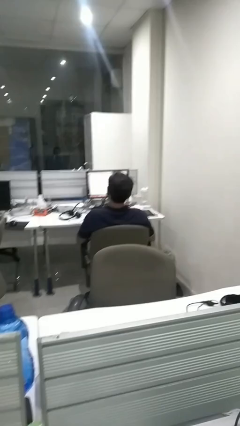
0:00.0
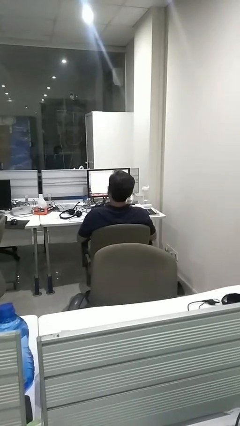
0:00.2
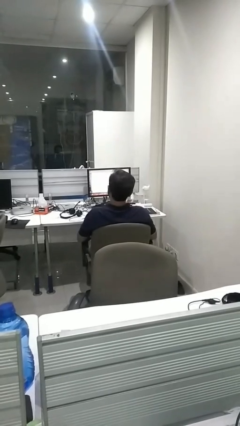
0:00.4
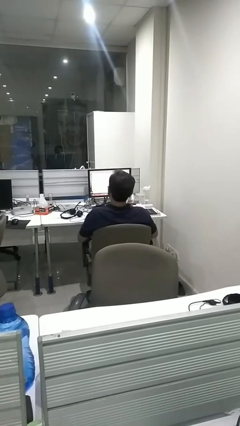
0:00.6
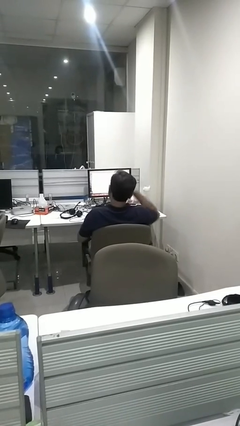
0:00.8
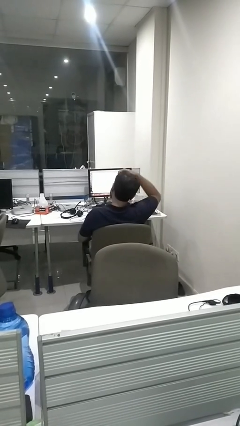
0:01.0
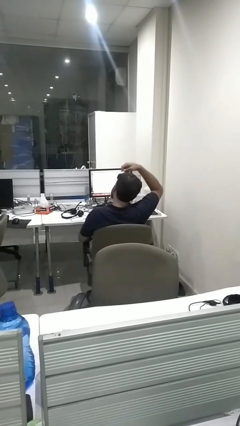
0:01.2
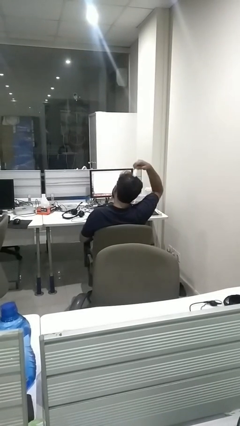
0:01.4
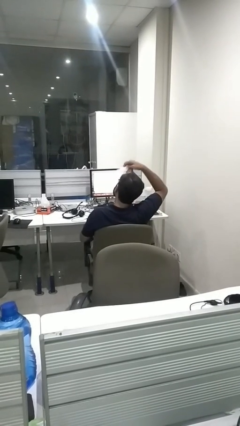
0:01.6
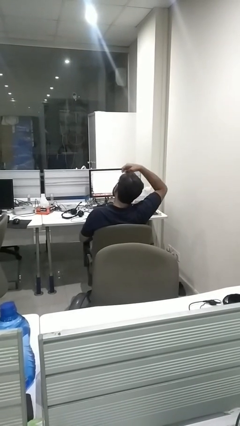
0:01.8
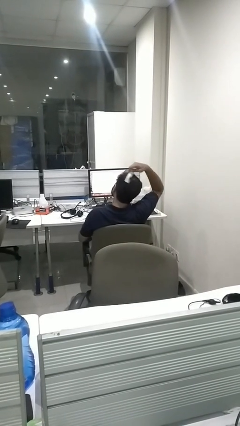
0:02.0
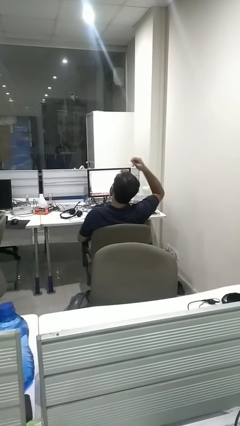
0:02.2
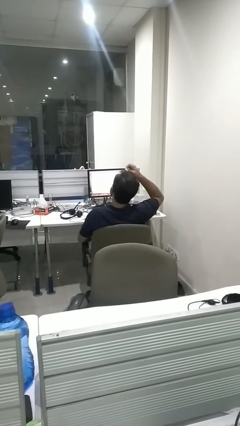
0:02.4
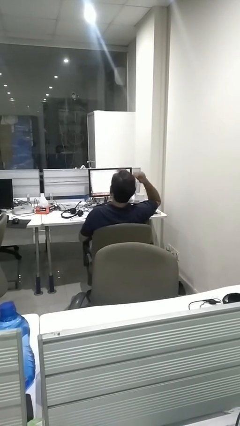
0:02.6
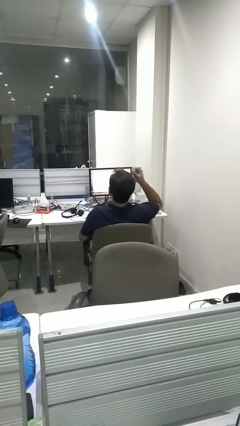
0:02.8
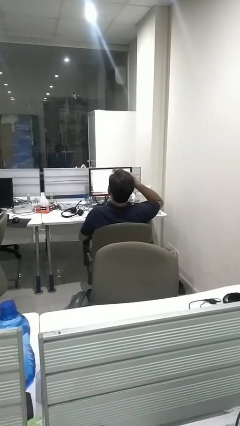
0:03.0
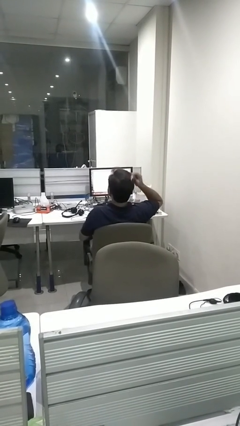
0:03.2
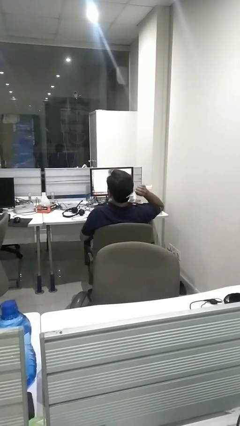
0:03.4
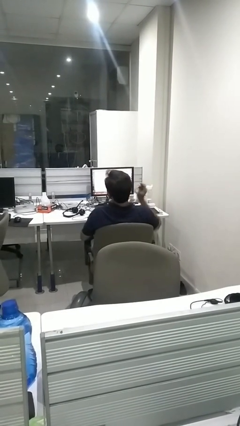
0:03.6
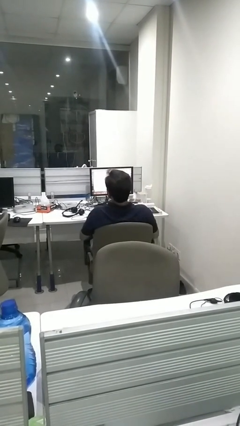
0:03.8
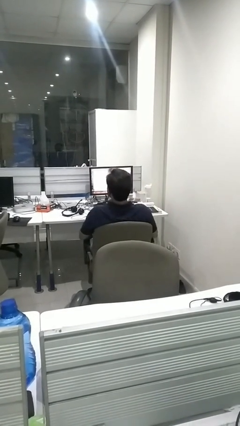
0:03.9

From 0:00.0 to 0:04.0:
person brushes hair

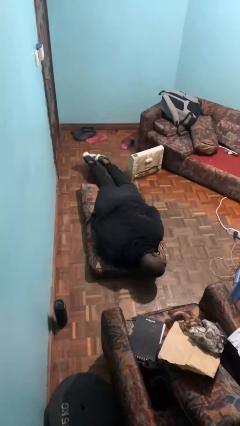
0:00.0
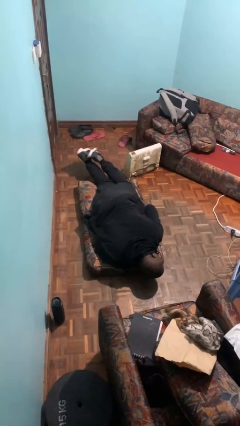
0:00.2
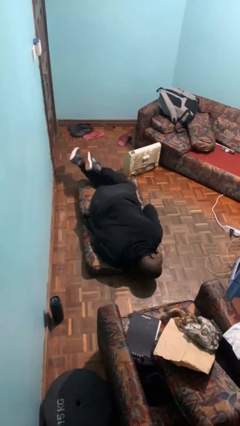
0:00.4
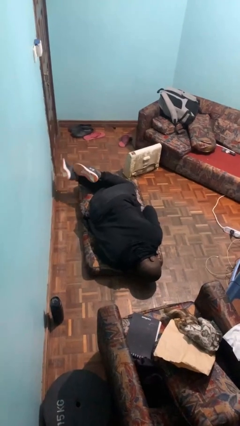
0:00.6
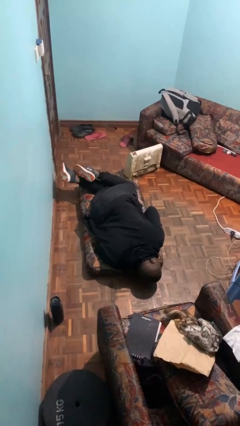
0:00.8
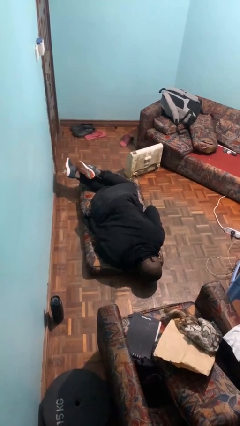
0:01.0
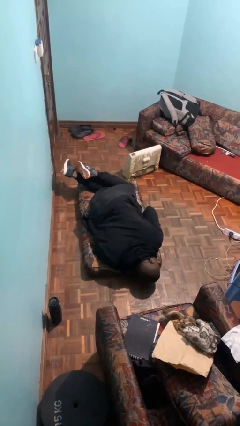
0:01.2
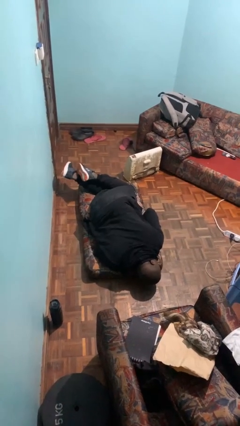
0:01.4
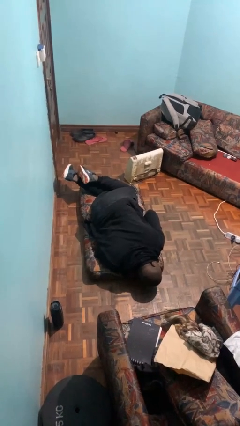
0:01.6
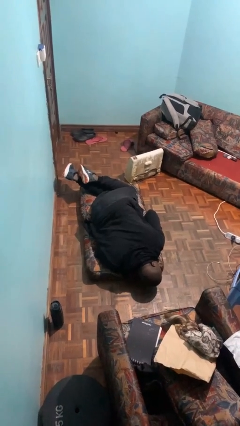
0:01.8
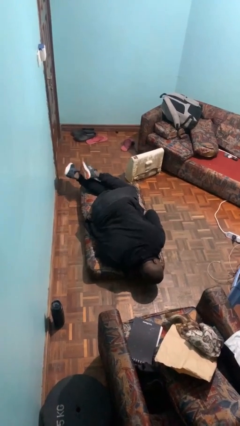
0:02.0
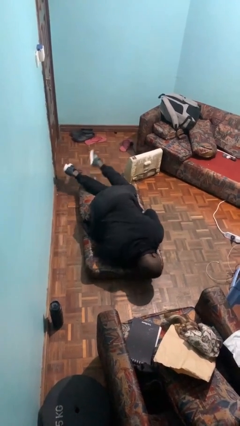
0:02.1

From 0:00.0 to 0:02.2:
person lies down on floor

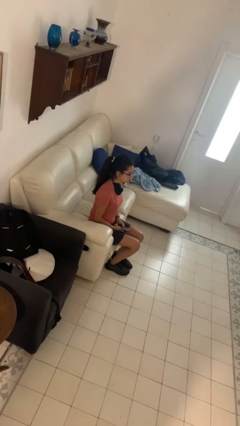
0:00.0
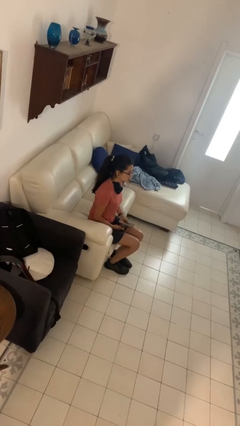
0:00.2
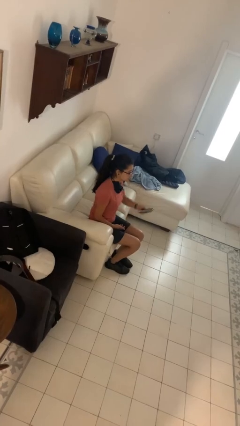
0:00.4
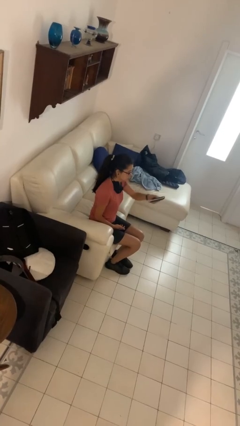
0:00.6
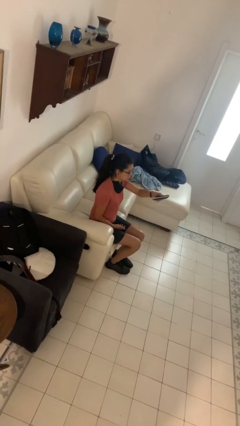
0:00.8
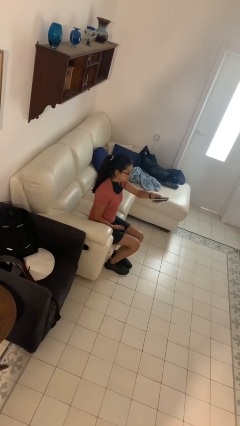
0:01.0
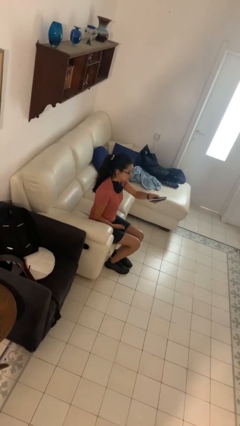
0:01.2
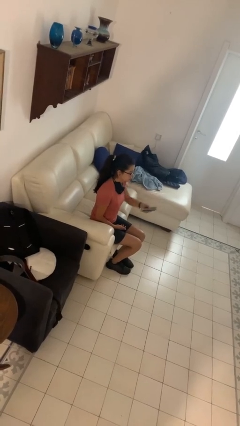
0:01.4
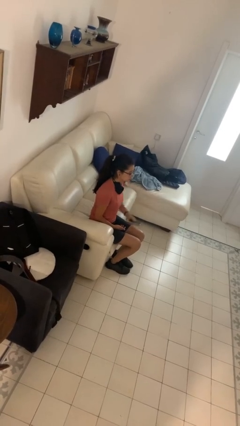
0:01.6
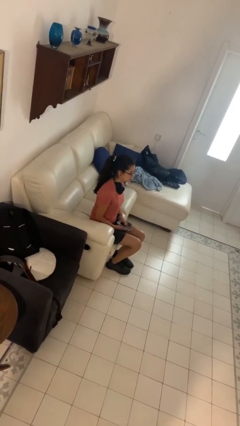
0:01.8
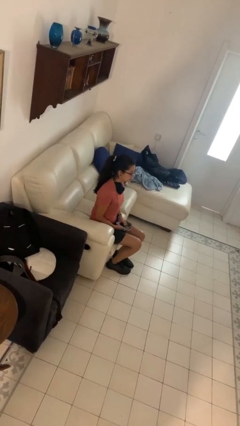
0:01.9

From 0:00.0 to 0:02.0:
person uses television remote

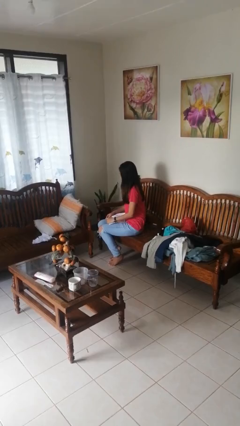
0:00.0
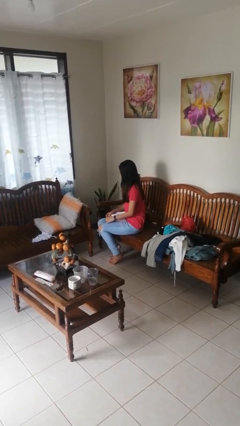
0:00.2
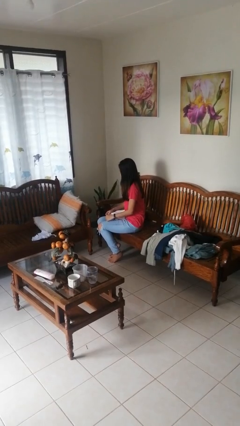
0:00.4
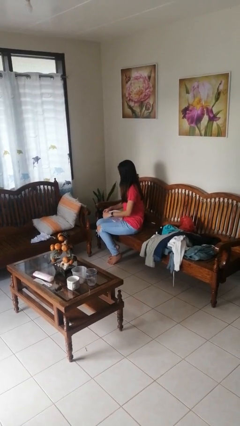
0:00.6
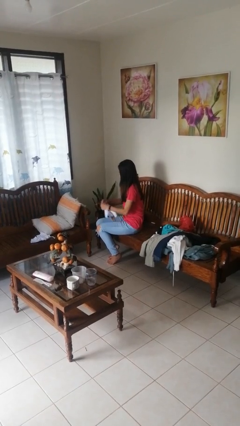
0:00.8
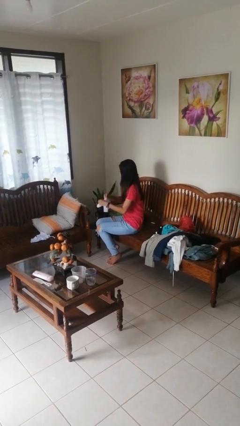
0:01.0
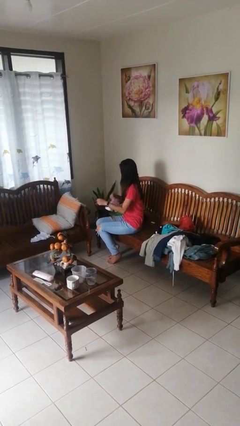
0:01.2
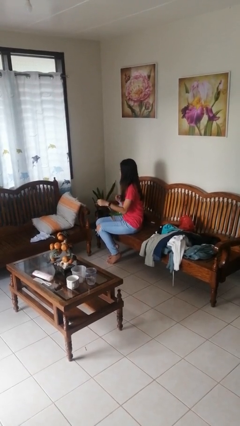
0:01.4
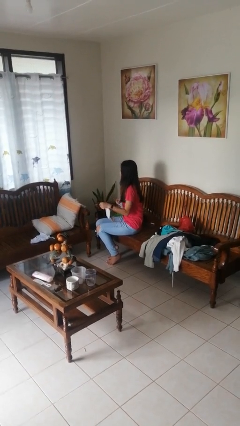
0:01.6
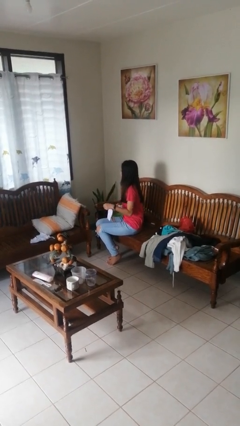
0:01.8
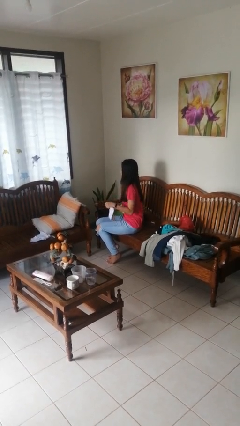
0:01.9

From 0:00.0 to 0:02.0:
person tears paper

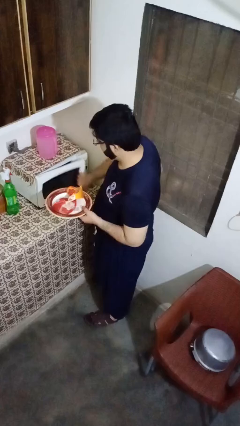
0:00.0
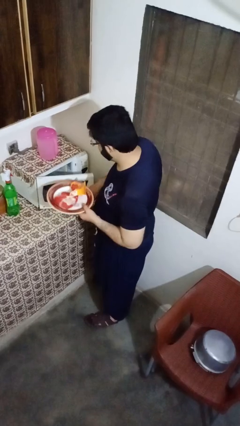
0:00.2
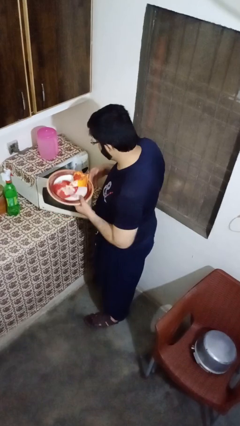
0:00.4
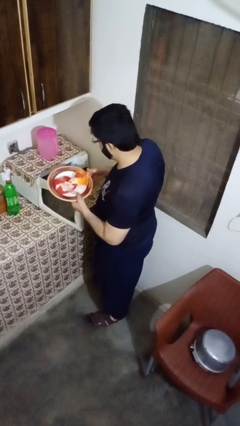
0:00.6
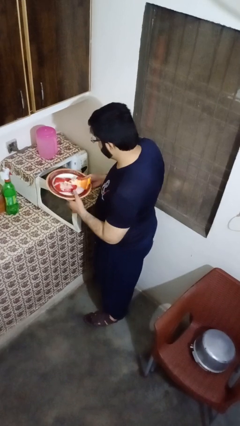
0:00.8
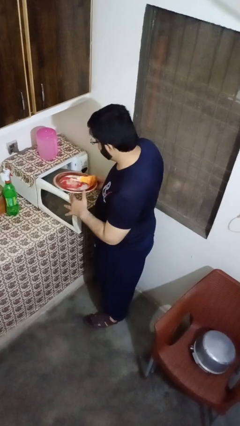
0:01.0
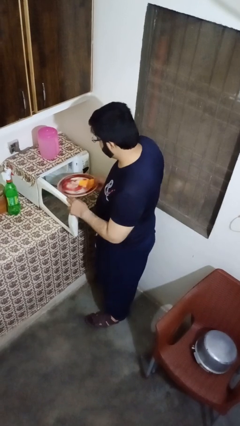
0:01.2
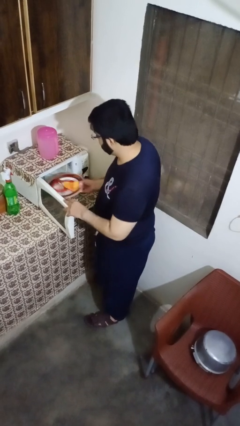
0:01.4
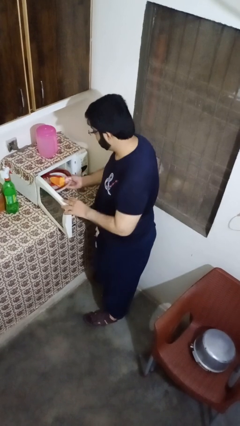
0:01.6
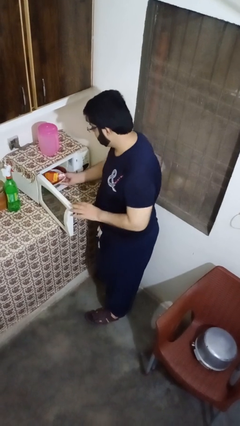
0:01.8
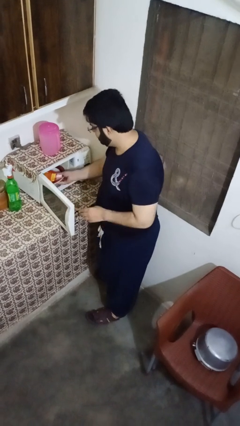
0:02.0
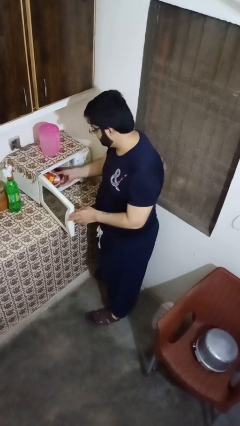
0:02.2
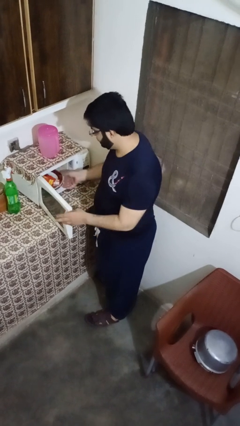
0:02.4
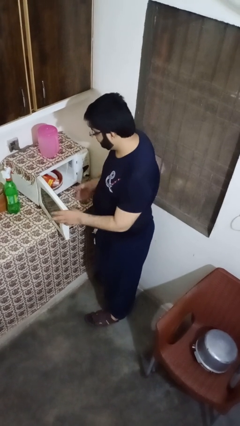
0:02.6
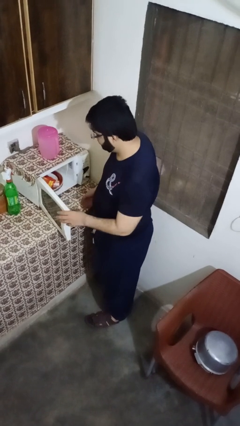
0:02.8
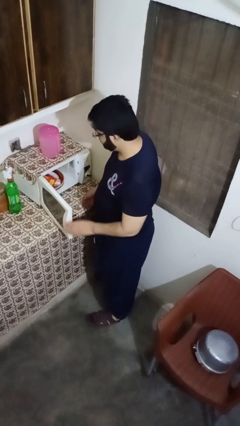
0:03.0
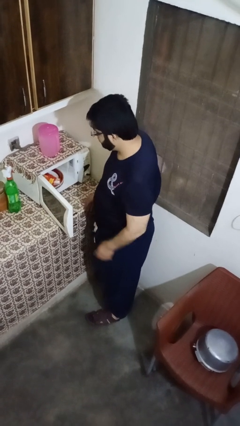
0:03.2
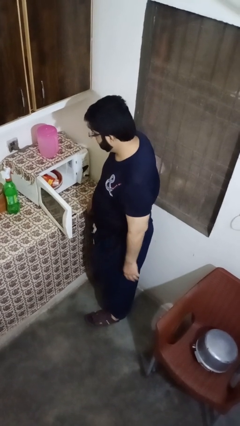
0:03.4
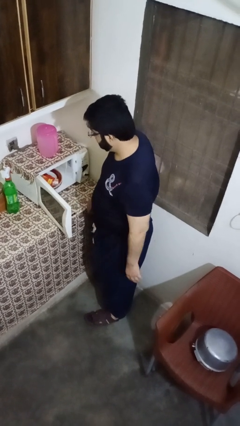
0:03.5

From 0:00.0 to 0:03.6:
person puts object into oven

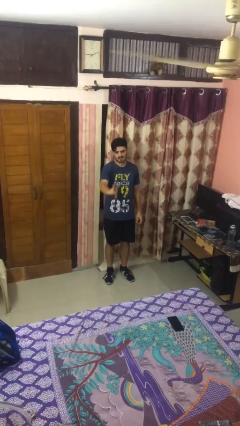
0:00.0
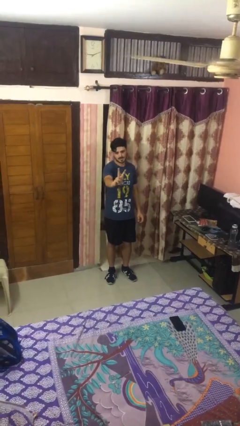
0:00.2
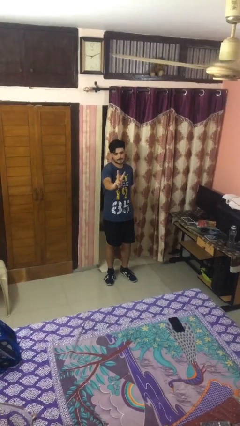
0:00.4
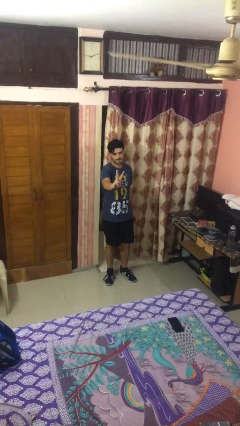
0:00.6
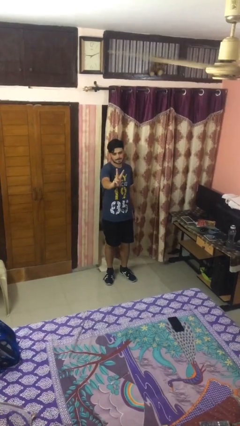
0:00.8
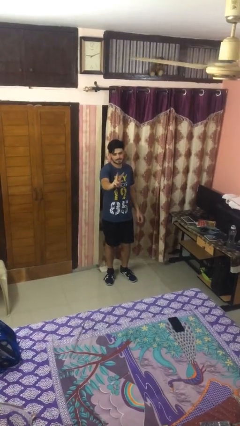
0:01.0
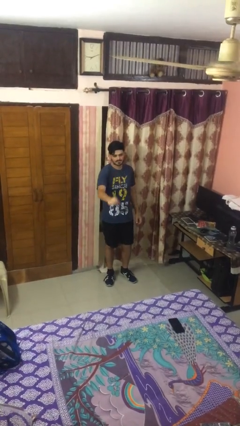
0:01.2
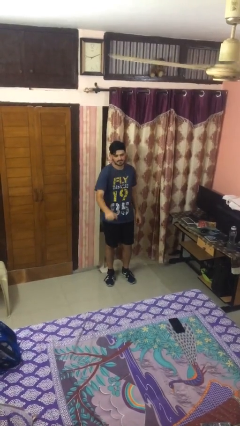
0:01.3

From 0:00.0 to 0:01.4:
person gestures peace

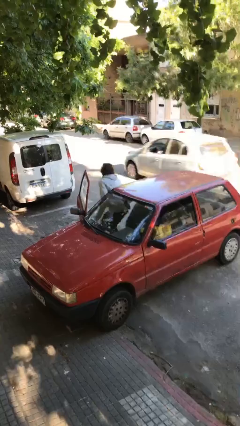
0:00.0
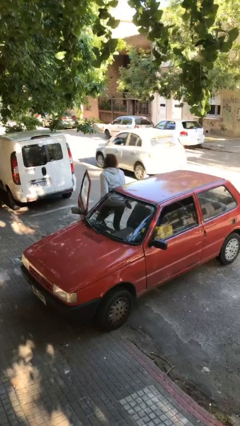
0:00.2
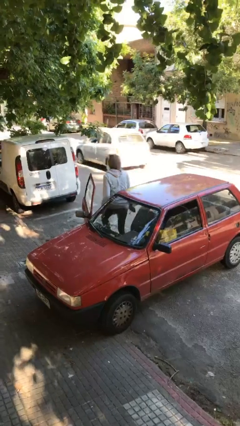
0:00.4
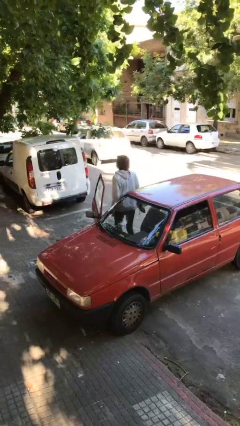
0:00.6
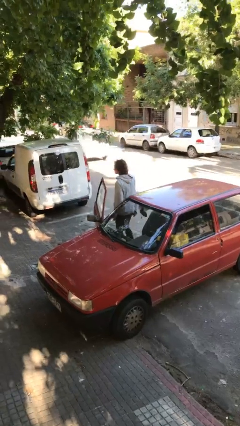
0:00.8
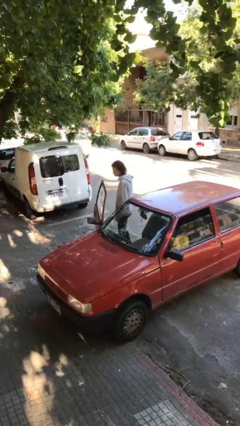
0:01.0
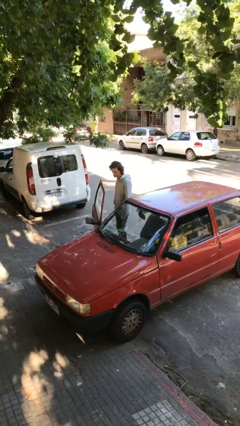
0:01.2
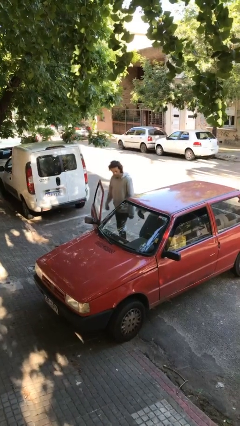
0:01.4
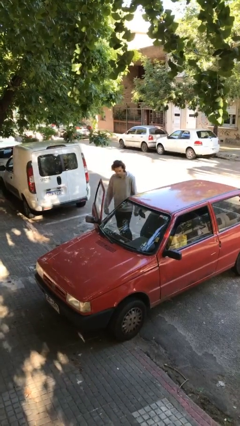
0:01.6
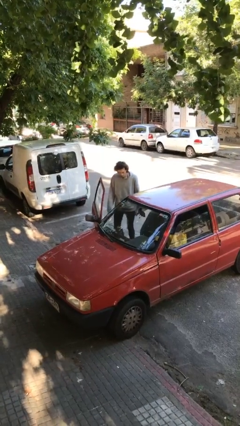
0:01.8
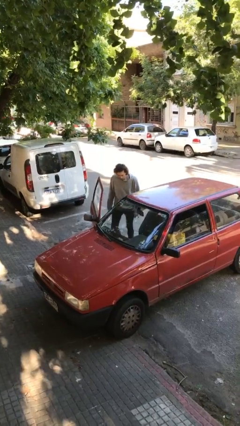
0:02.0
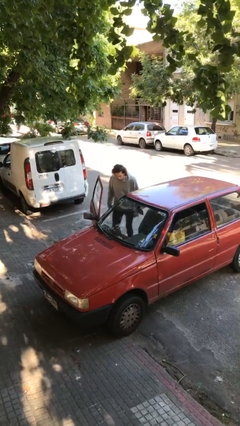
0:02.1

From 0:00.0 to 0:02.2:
person exits car
